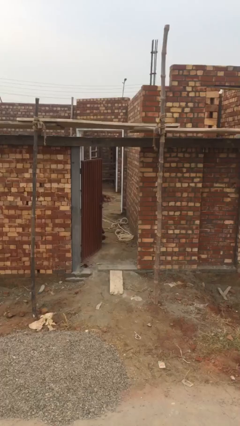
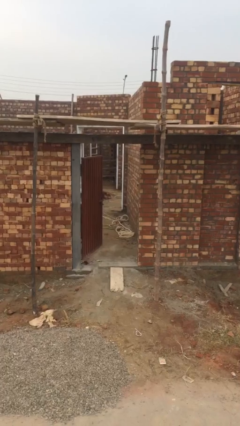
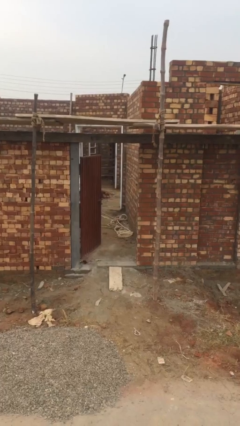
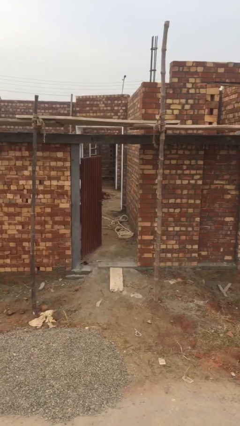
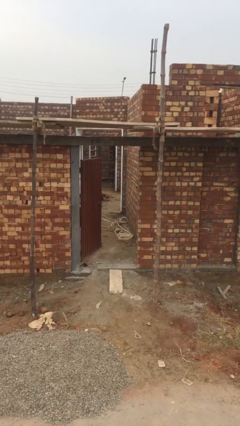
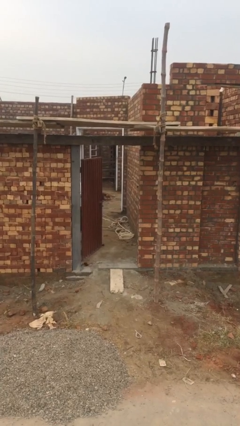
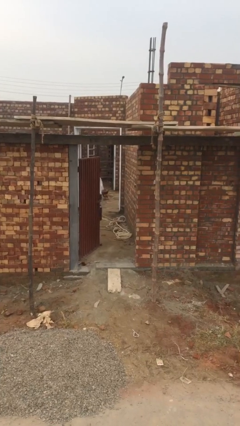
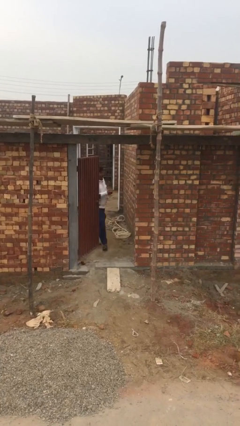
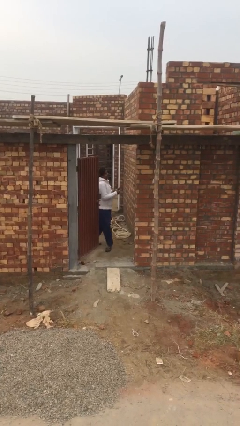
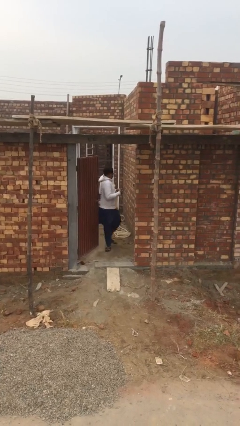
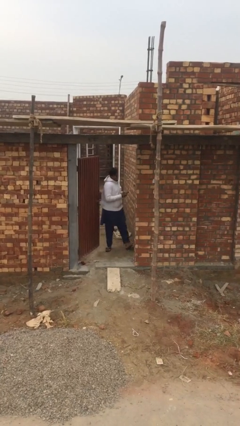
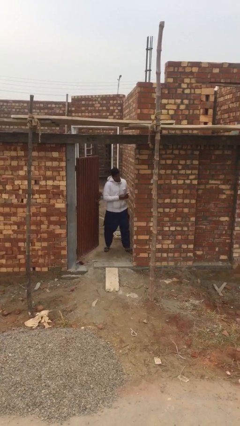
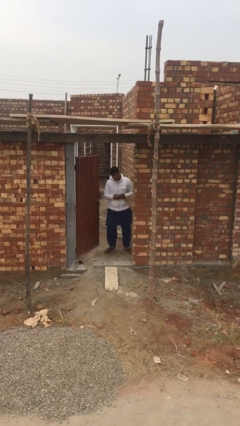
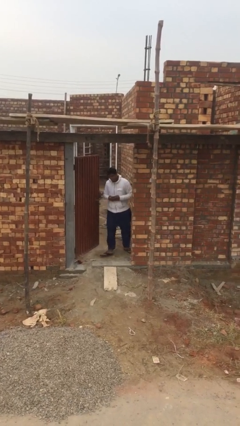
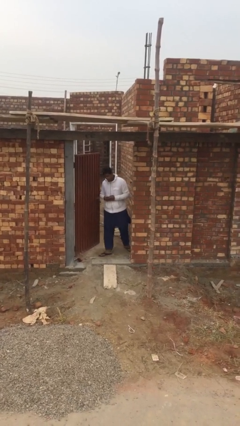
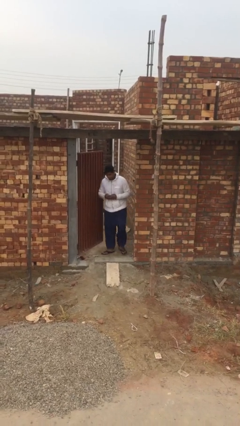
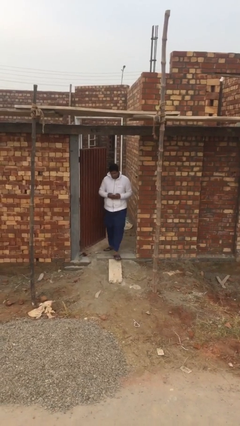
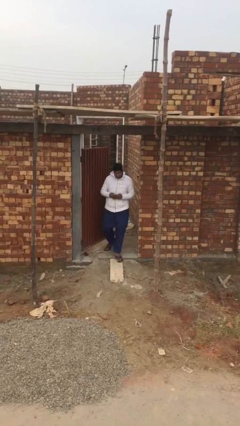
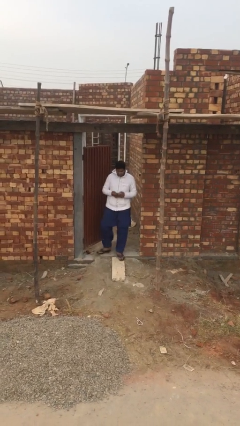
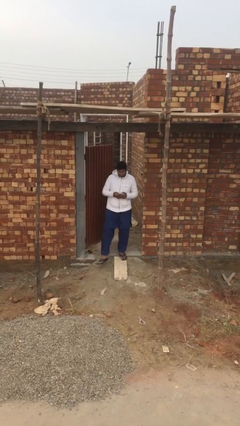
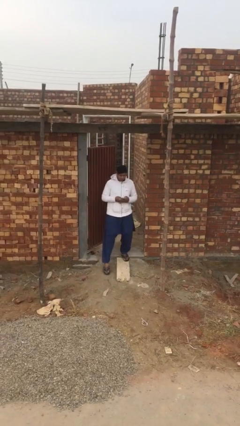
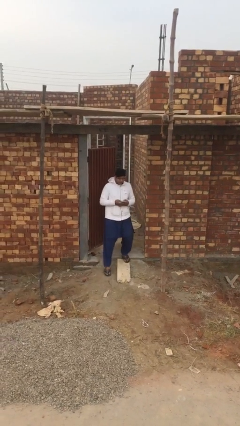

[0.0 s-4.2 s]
person enters scene through structure

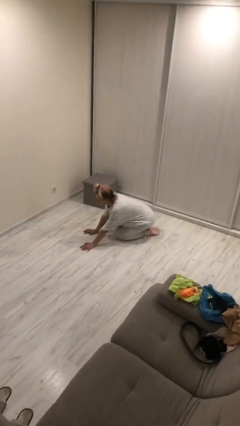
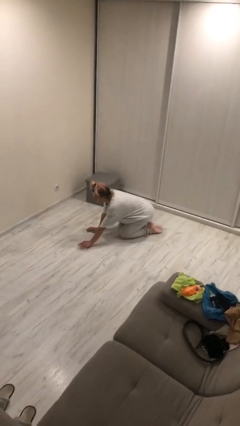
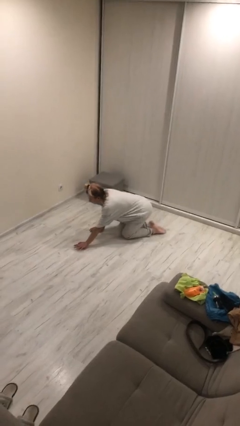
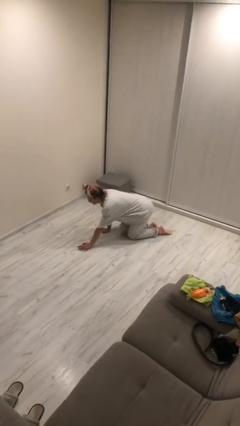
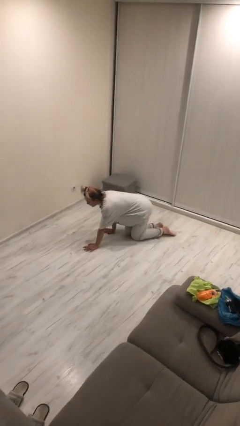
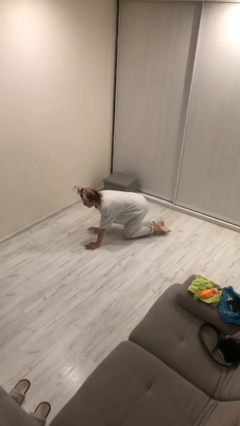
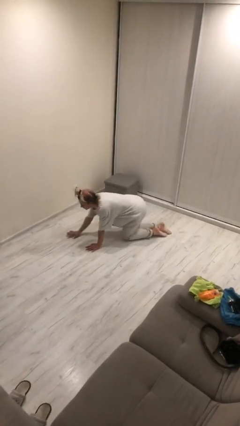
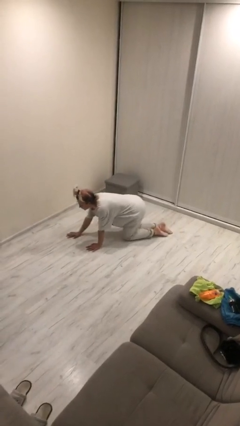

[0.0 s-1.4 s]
person crawls

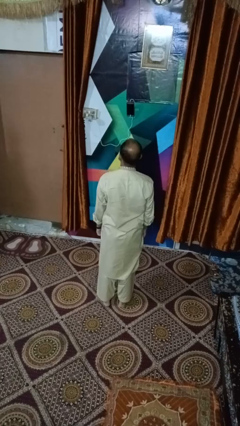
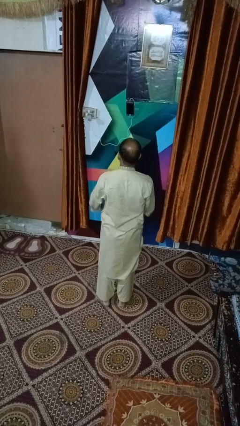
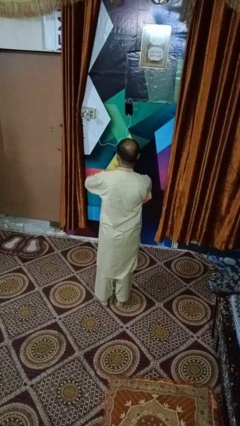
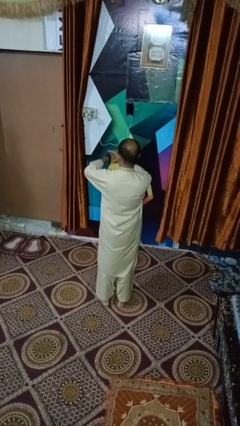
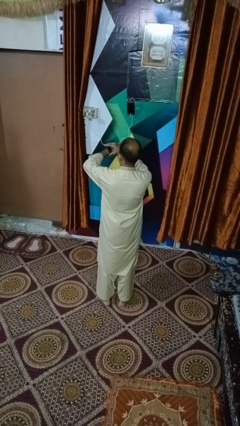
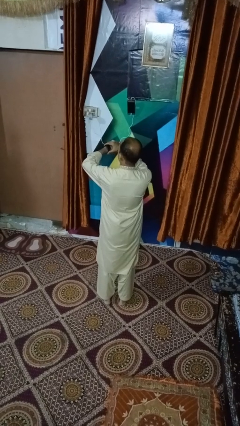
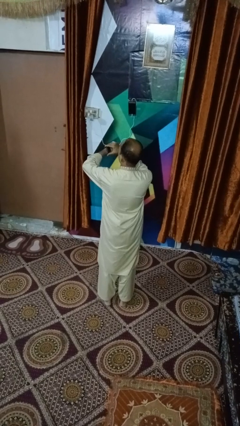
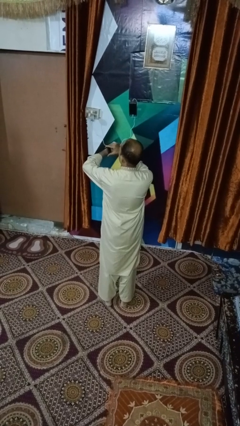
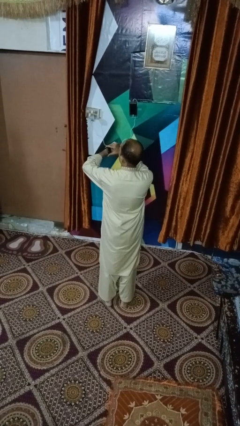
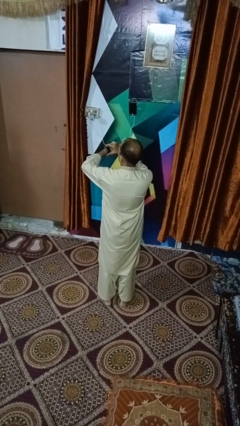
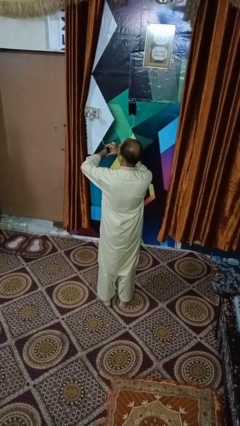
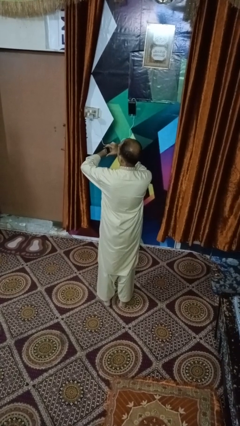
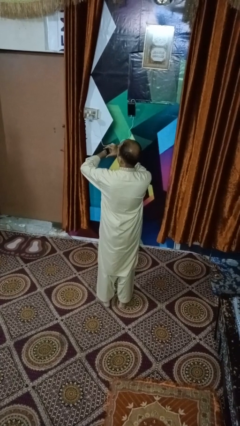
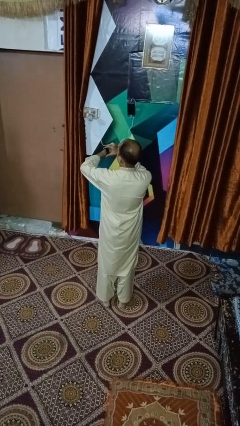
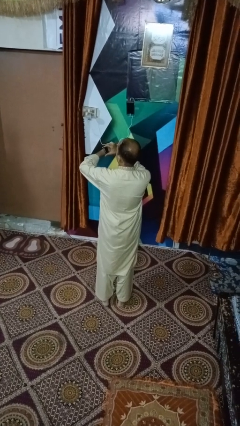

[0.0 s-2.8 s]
person looks at wristwatch

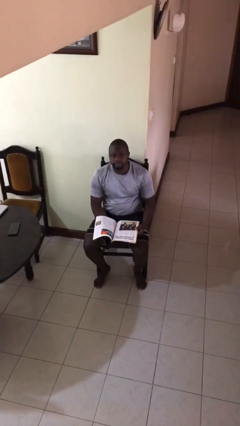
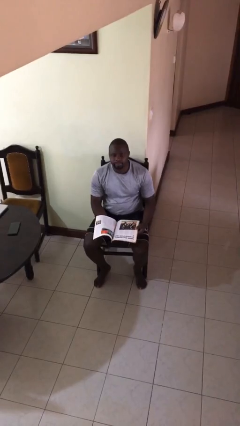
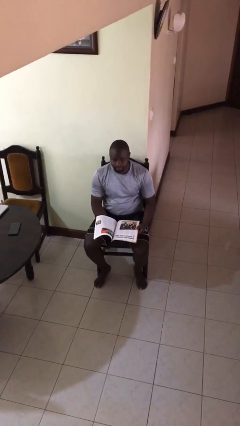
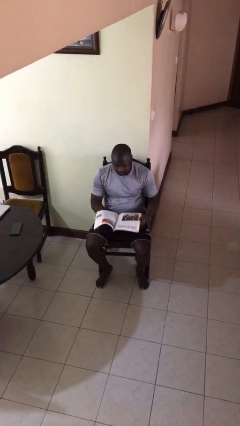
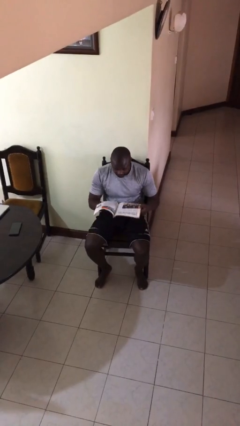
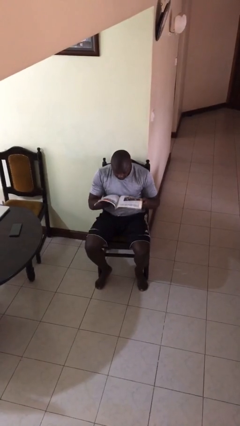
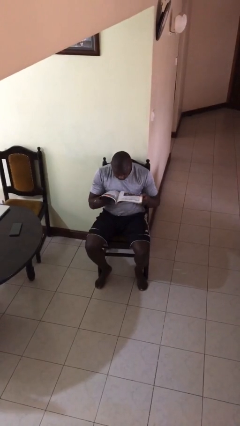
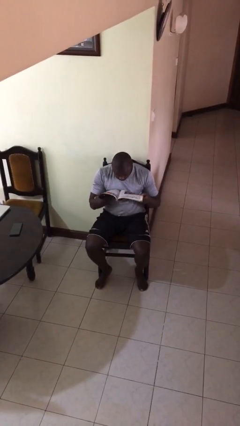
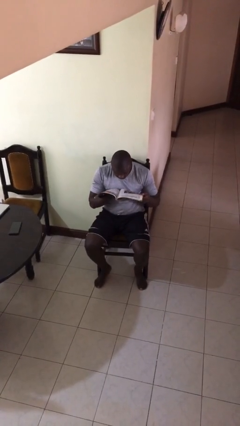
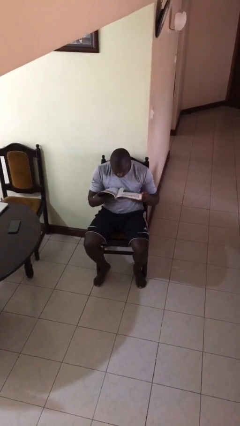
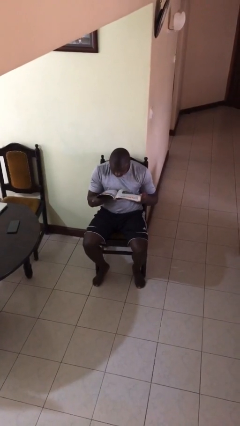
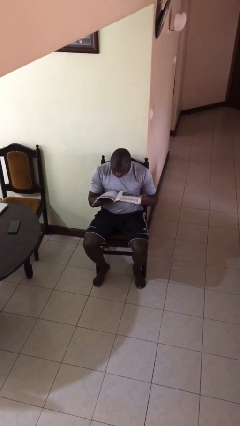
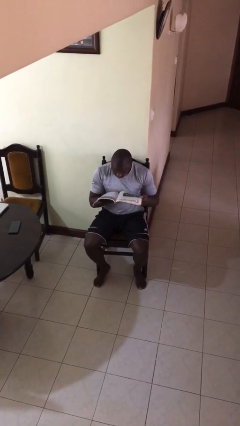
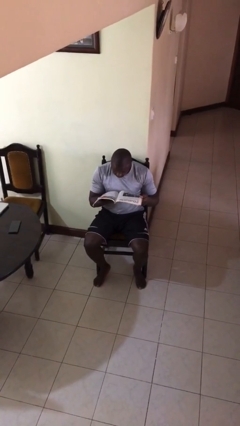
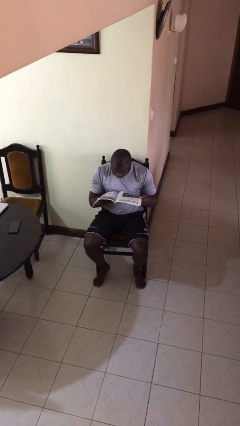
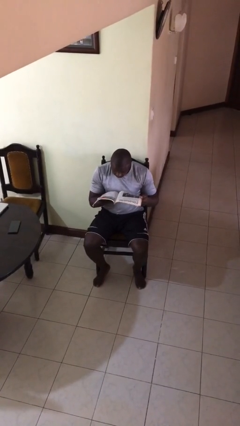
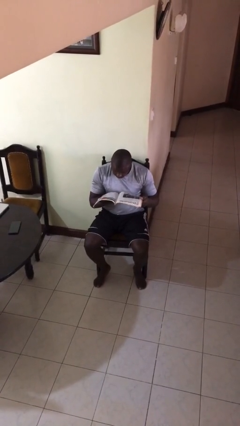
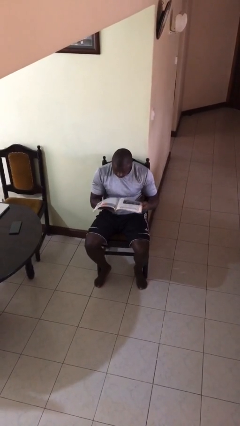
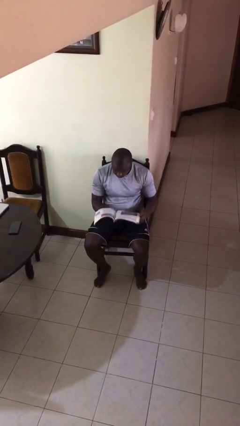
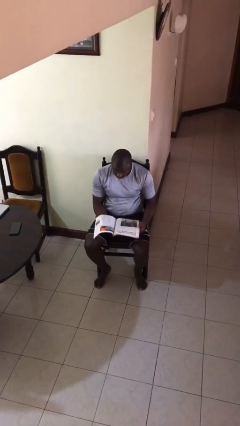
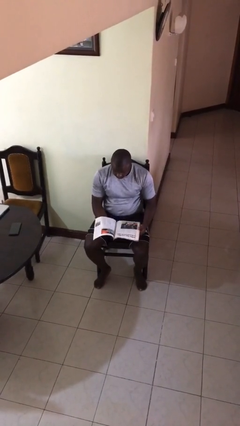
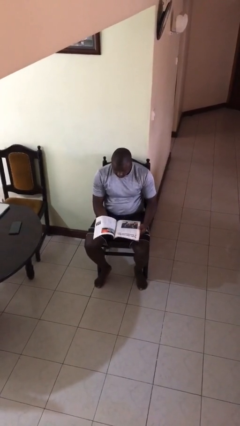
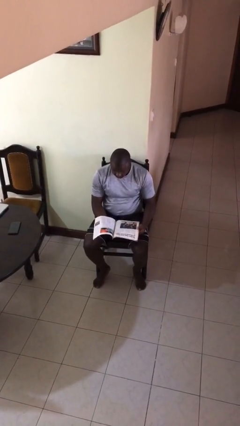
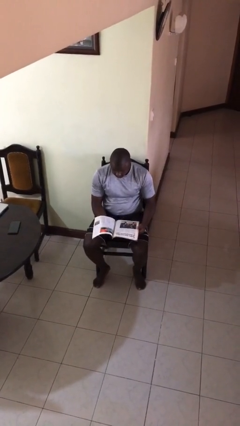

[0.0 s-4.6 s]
person reads document

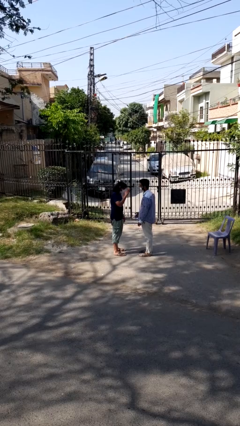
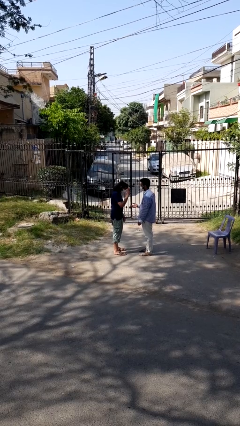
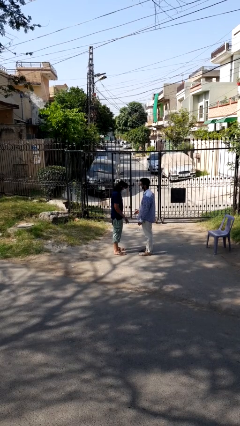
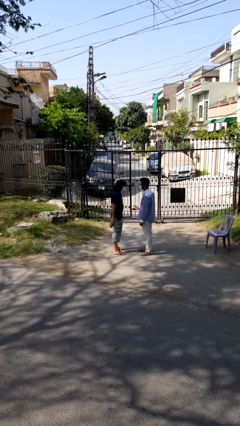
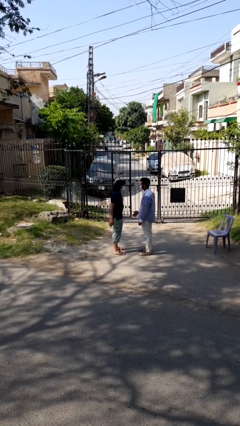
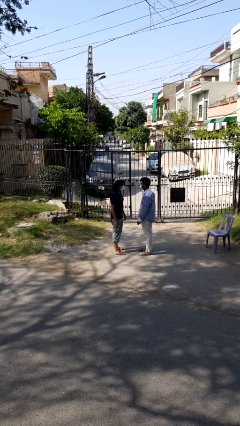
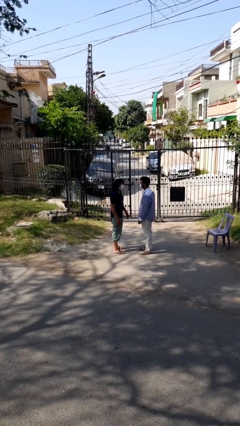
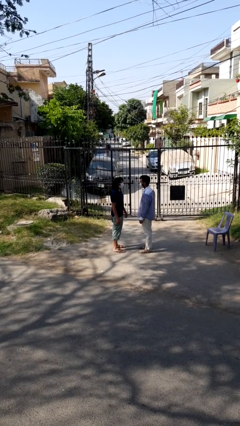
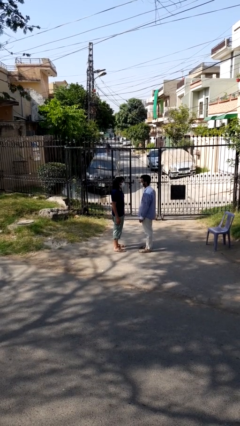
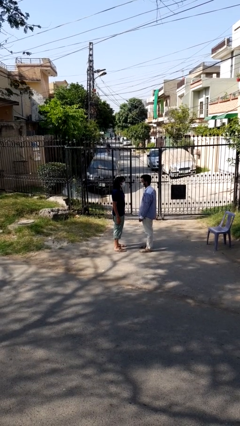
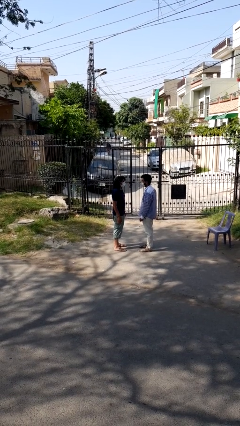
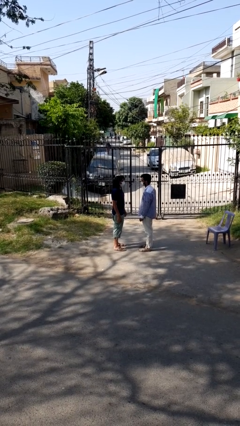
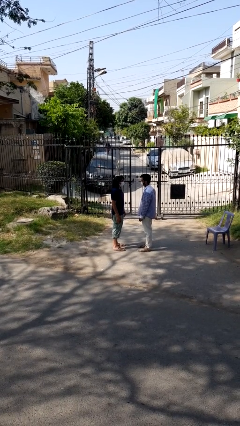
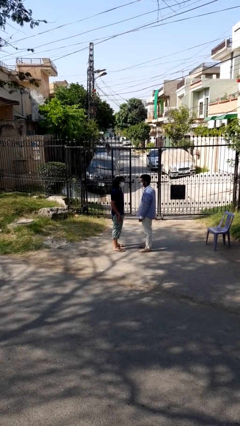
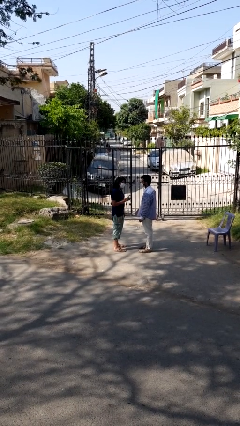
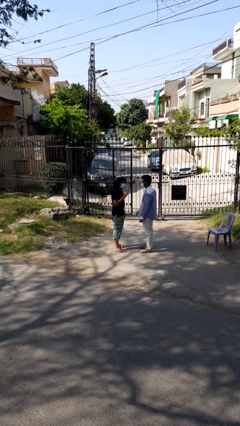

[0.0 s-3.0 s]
person highfives hand

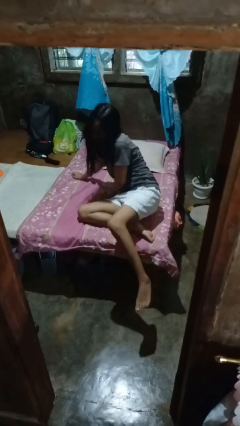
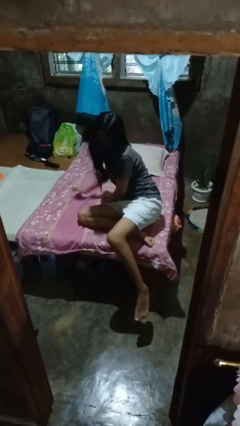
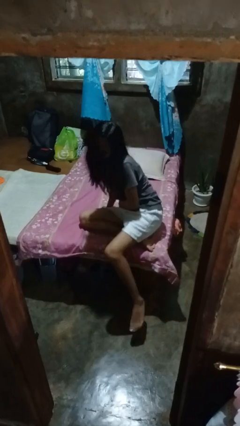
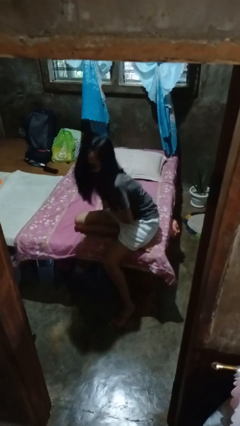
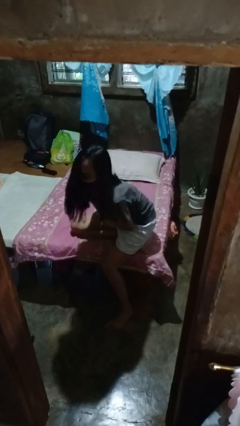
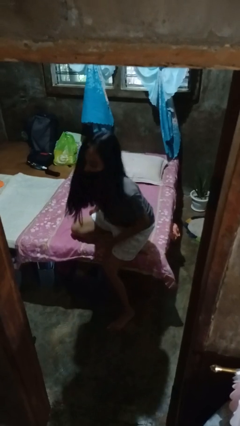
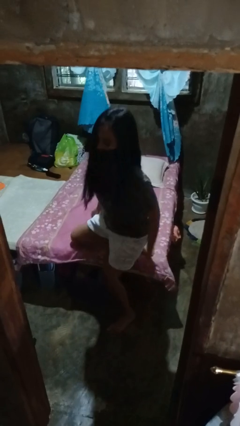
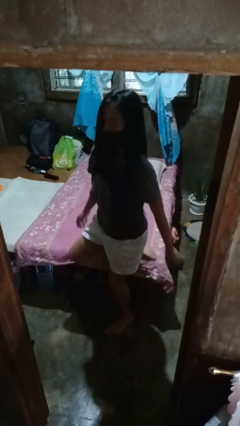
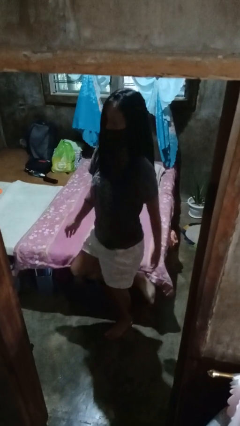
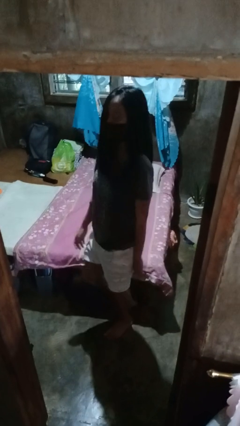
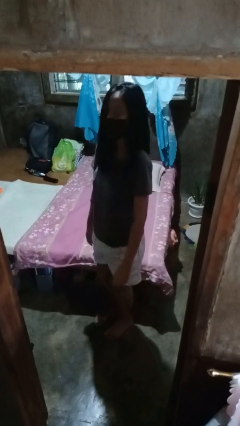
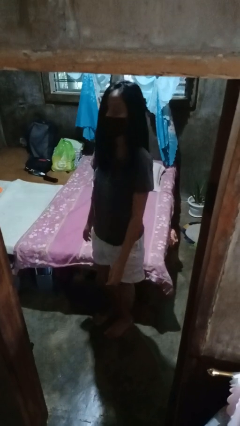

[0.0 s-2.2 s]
person stands up
